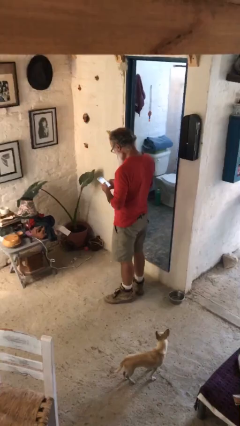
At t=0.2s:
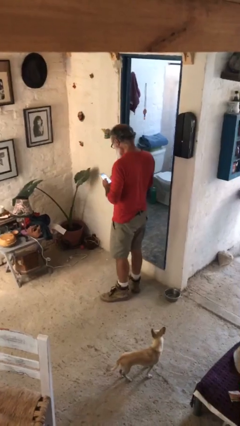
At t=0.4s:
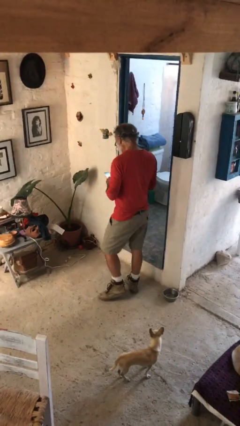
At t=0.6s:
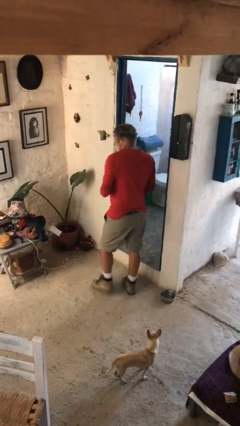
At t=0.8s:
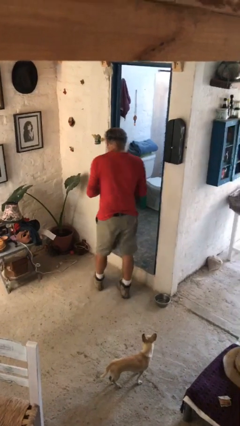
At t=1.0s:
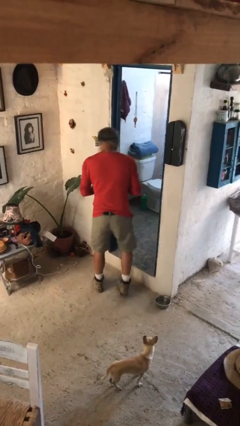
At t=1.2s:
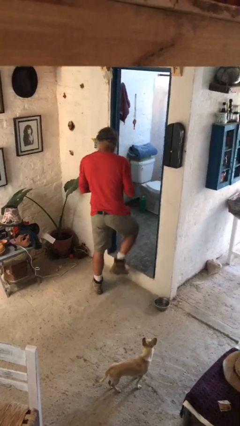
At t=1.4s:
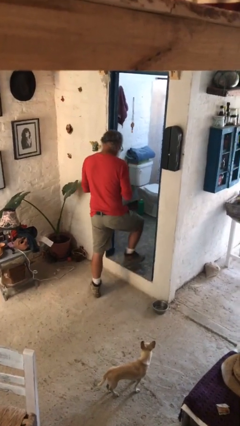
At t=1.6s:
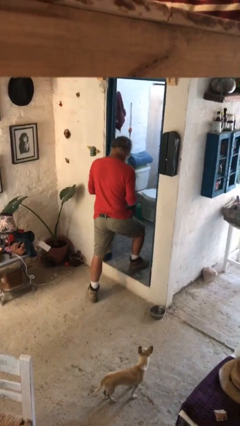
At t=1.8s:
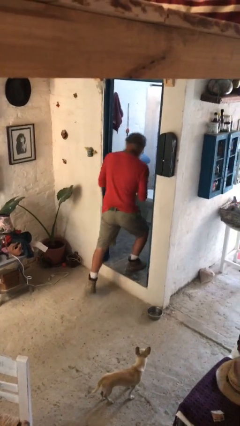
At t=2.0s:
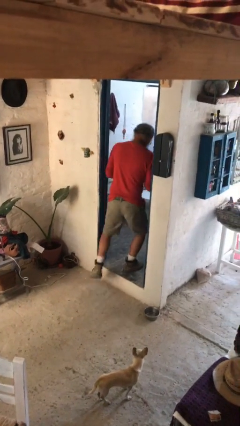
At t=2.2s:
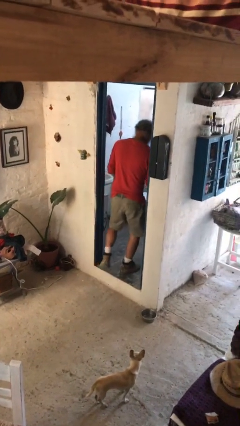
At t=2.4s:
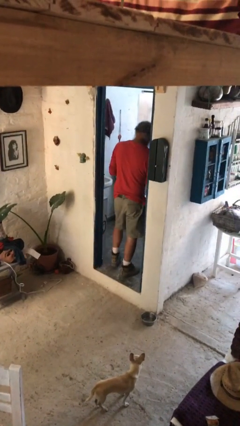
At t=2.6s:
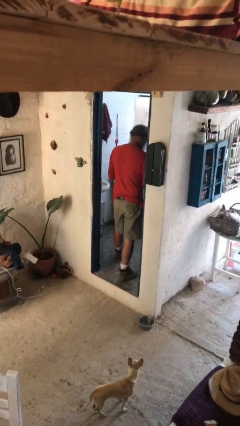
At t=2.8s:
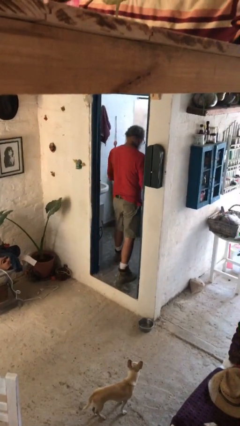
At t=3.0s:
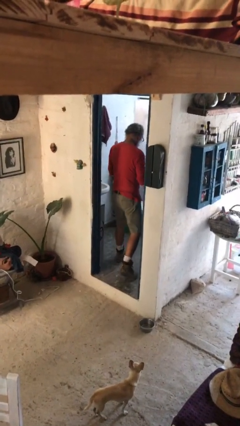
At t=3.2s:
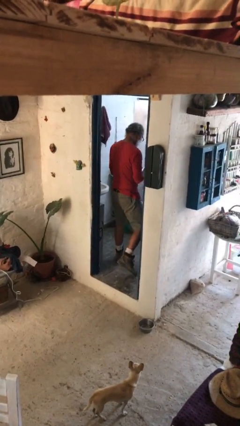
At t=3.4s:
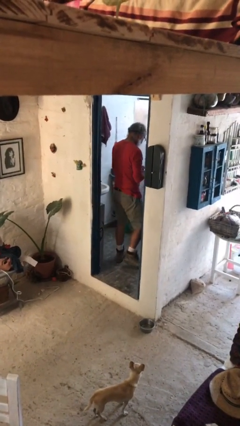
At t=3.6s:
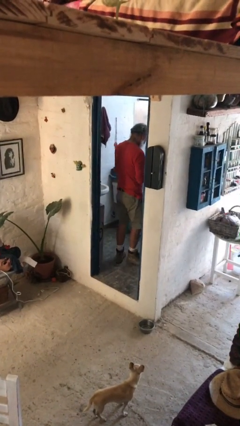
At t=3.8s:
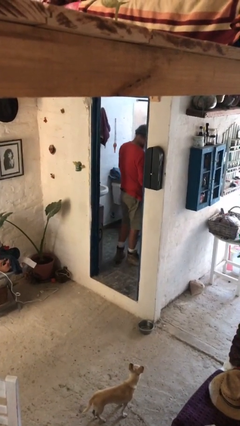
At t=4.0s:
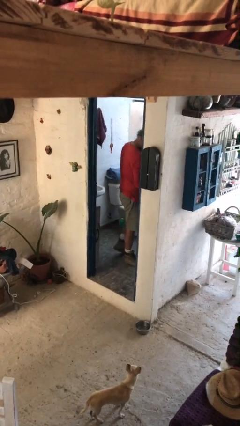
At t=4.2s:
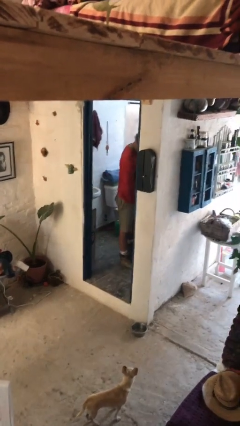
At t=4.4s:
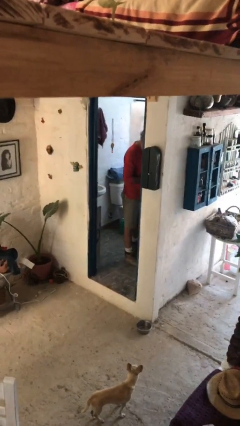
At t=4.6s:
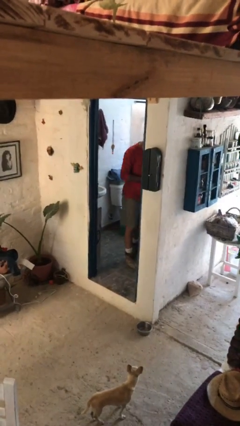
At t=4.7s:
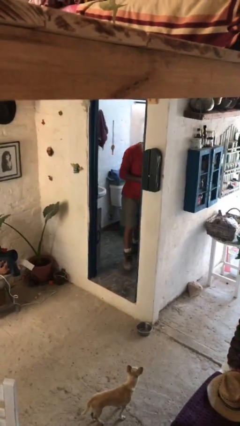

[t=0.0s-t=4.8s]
person exits scene through structure

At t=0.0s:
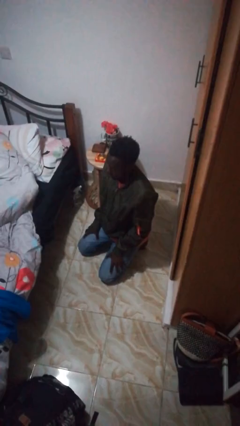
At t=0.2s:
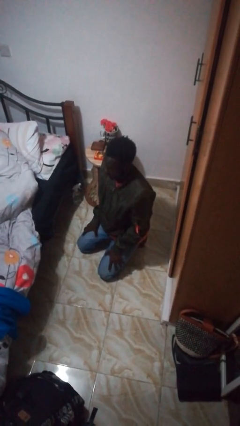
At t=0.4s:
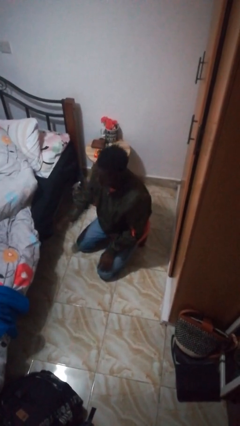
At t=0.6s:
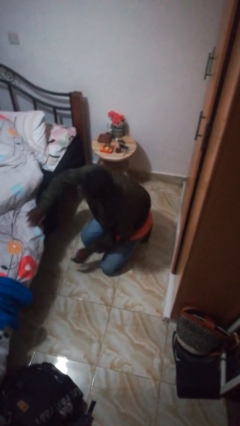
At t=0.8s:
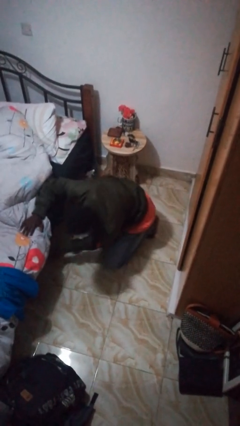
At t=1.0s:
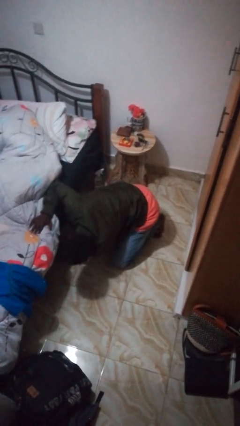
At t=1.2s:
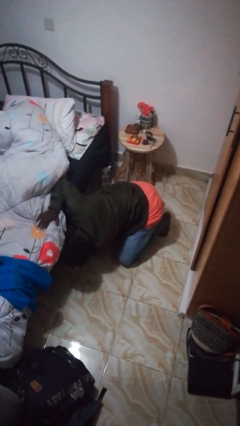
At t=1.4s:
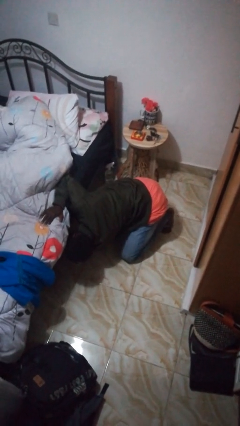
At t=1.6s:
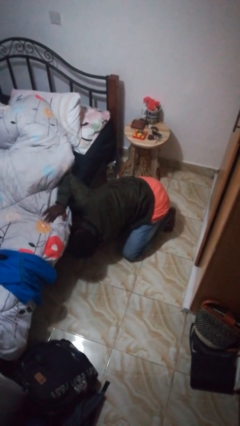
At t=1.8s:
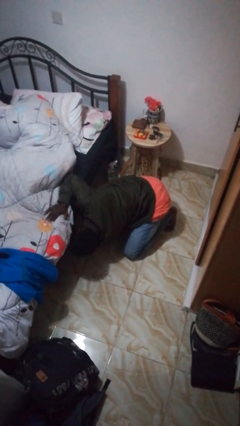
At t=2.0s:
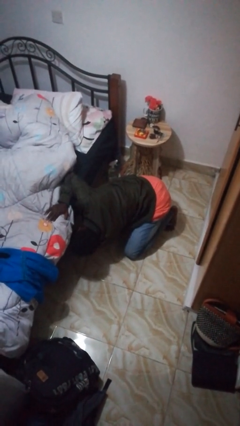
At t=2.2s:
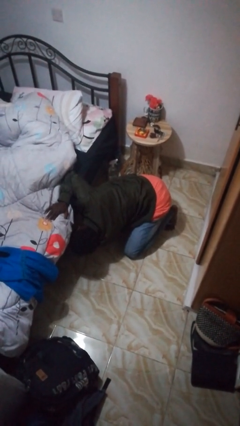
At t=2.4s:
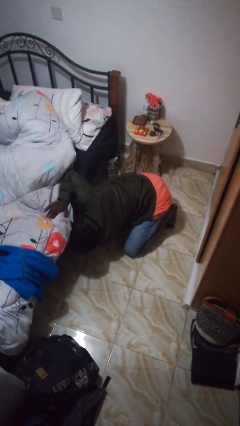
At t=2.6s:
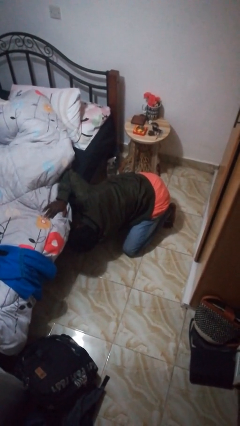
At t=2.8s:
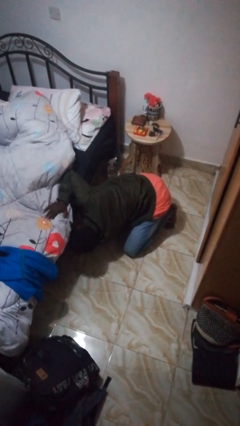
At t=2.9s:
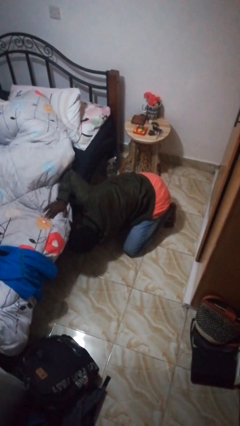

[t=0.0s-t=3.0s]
person searches under bed

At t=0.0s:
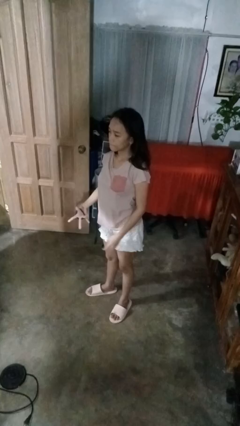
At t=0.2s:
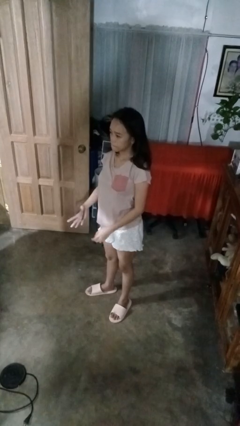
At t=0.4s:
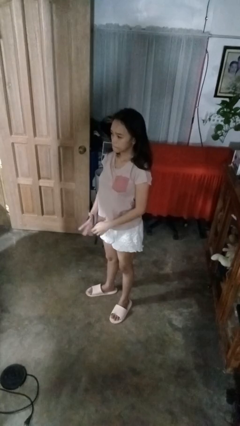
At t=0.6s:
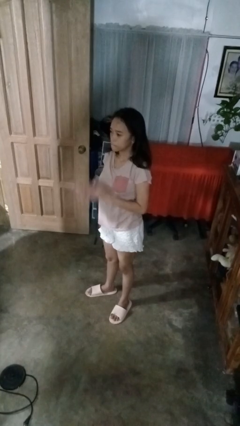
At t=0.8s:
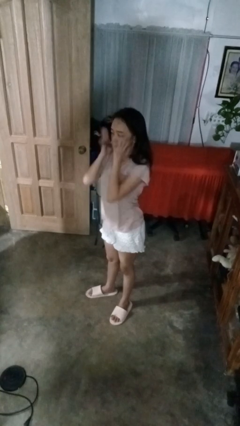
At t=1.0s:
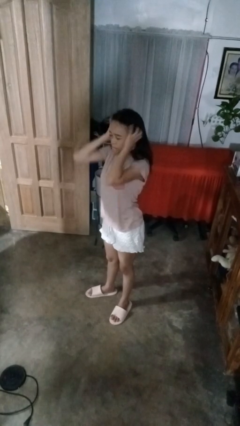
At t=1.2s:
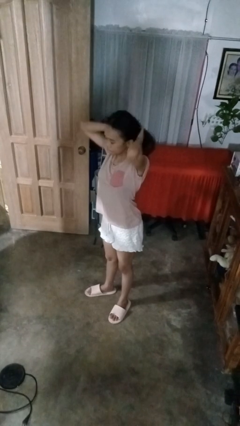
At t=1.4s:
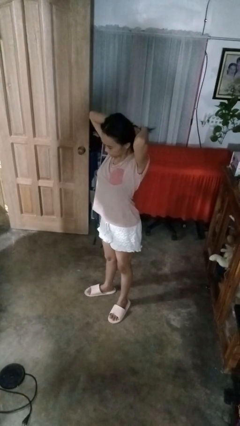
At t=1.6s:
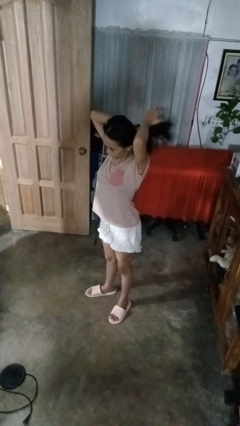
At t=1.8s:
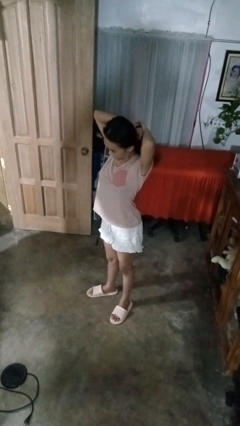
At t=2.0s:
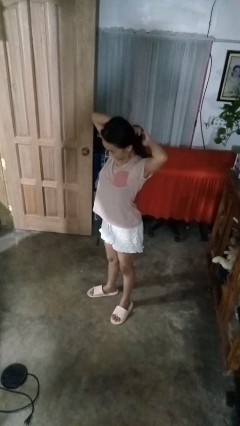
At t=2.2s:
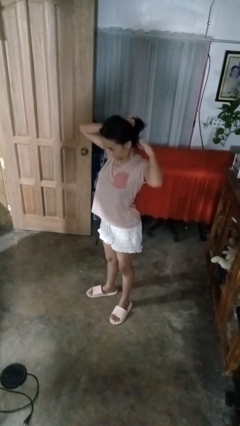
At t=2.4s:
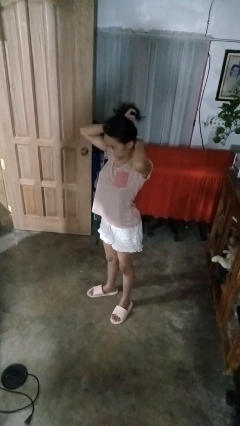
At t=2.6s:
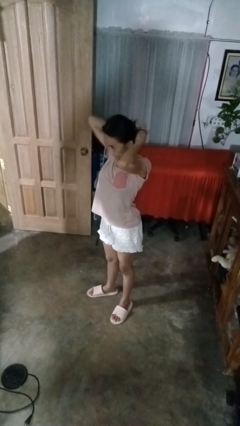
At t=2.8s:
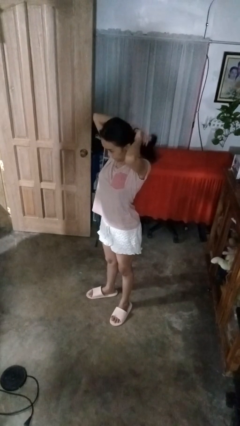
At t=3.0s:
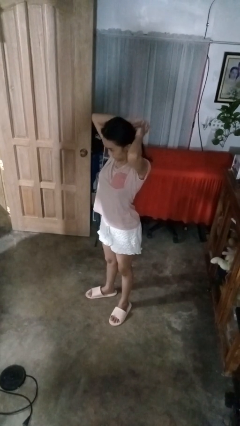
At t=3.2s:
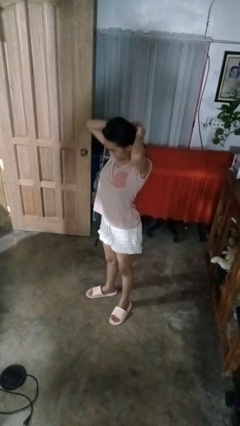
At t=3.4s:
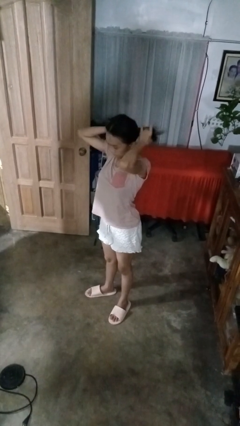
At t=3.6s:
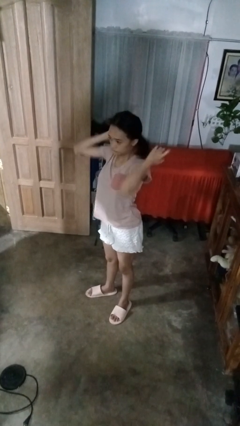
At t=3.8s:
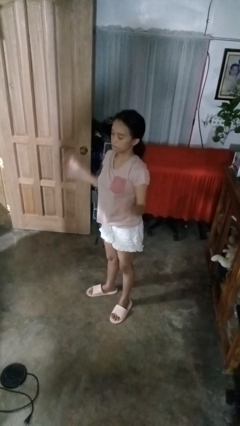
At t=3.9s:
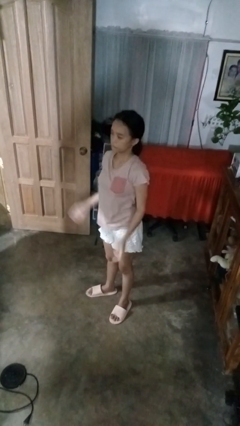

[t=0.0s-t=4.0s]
person puts hair in ponytail

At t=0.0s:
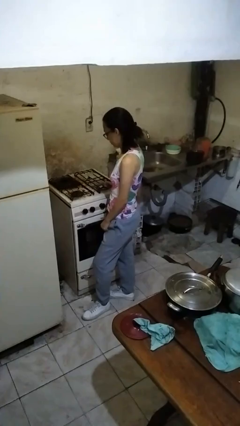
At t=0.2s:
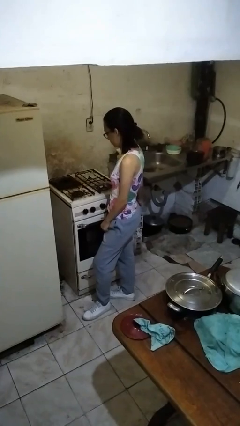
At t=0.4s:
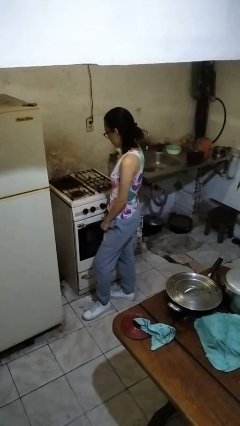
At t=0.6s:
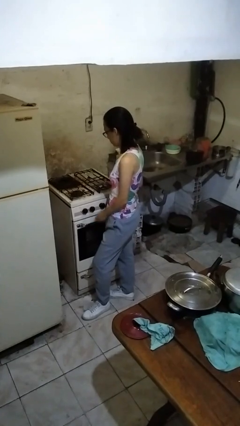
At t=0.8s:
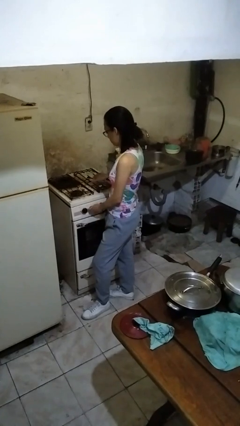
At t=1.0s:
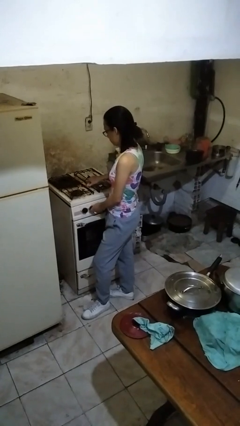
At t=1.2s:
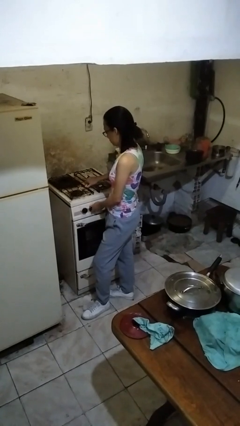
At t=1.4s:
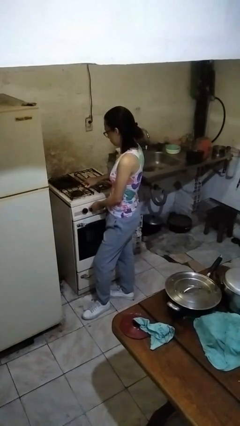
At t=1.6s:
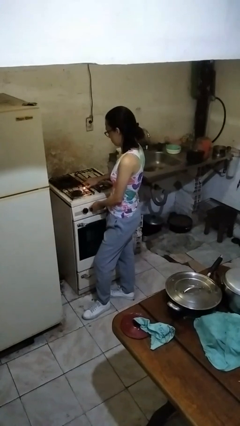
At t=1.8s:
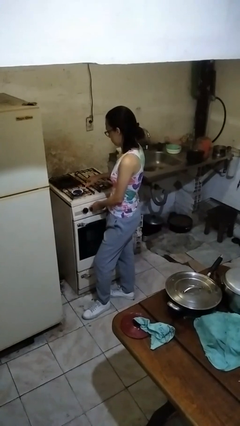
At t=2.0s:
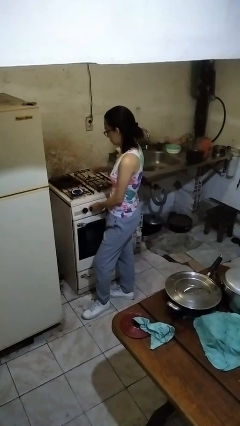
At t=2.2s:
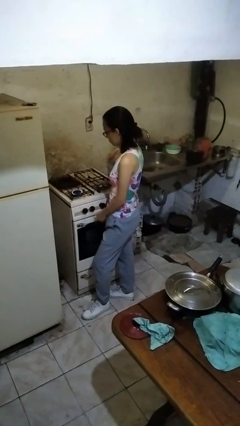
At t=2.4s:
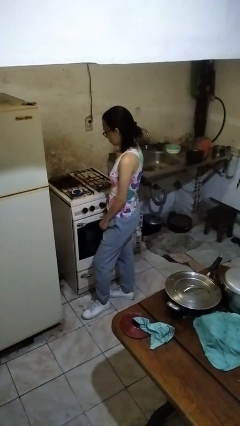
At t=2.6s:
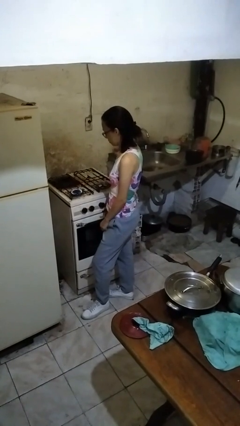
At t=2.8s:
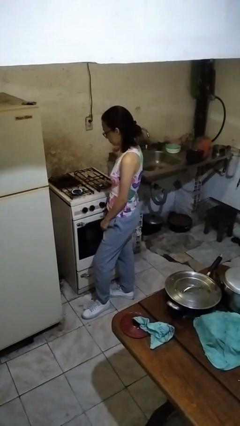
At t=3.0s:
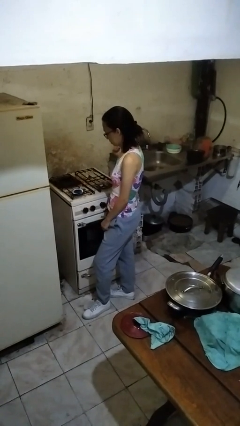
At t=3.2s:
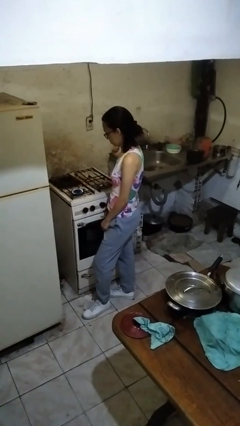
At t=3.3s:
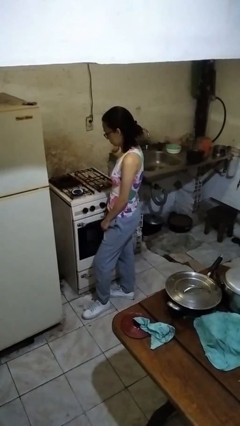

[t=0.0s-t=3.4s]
person turns on stovetop

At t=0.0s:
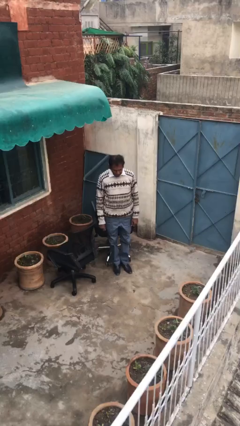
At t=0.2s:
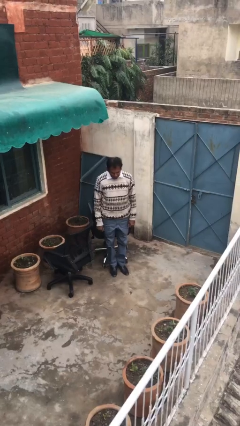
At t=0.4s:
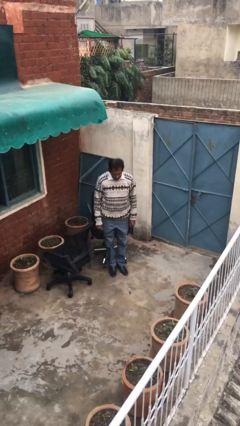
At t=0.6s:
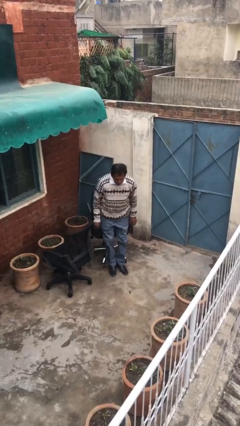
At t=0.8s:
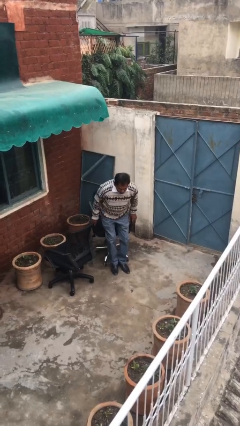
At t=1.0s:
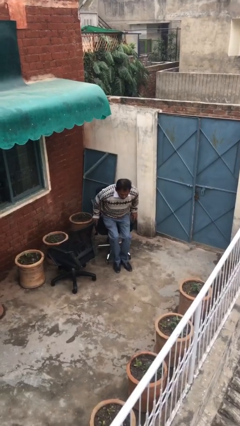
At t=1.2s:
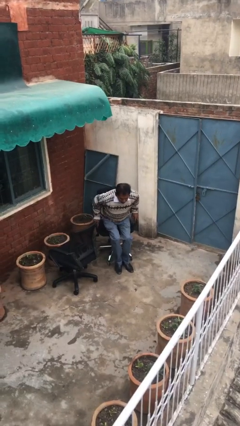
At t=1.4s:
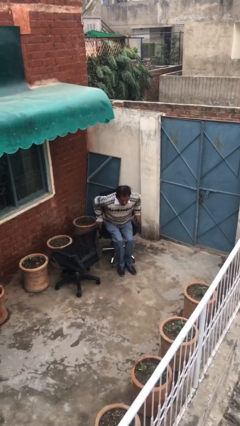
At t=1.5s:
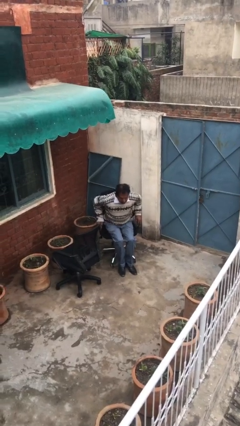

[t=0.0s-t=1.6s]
person sits down

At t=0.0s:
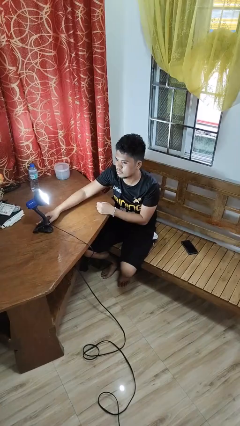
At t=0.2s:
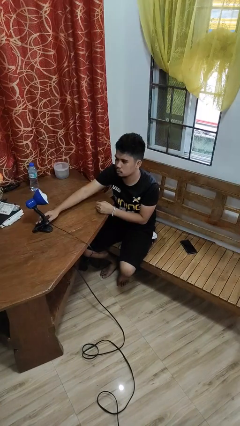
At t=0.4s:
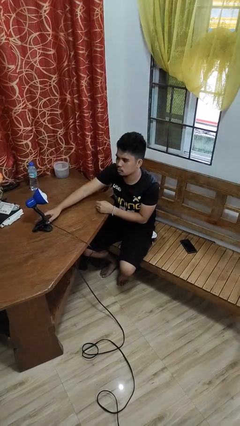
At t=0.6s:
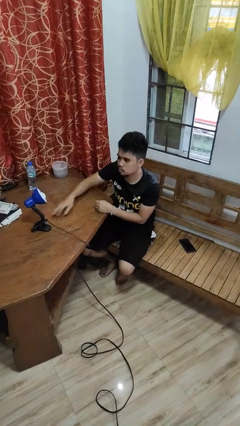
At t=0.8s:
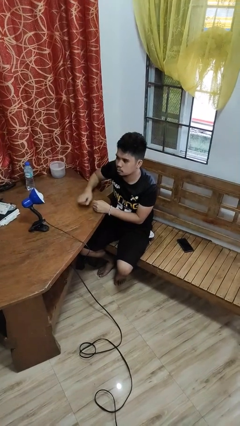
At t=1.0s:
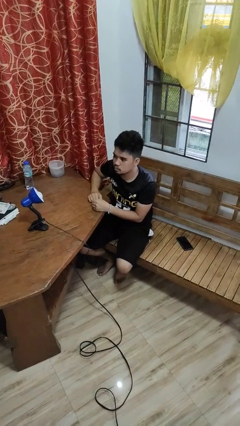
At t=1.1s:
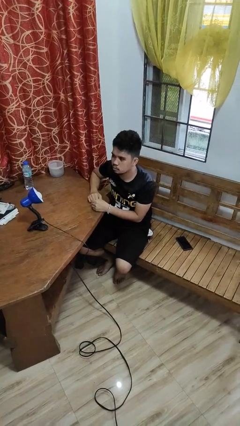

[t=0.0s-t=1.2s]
person turns off lamp
